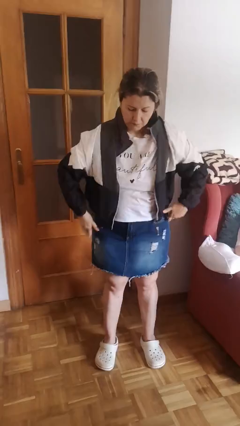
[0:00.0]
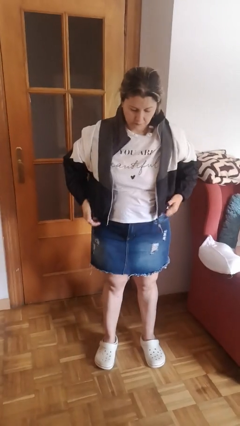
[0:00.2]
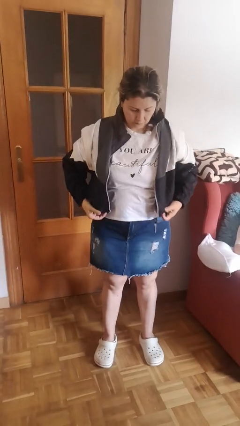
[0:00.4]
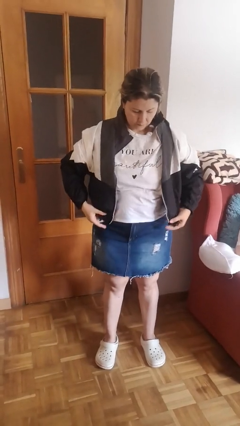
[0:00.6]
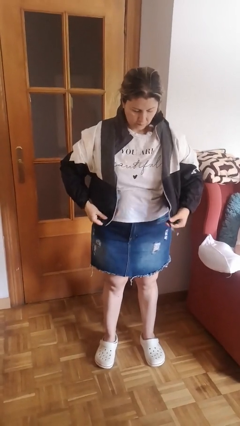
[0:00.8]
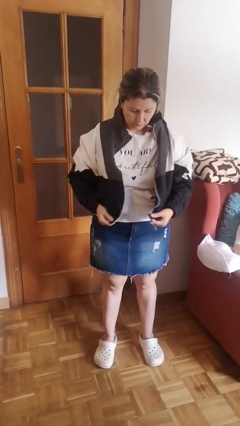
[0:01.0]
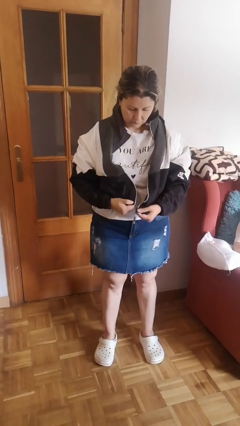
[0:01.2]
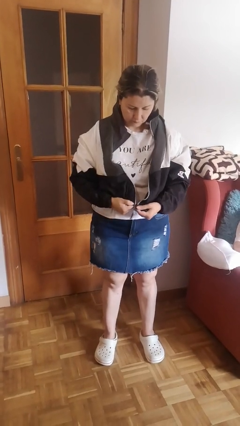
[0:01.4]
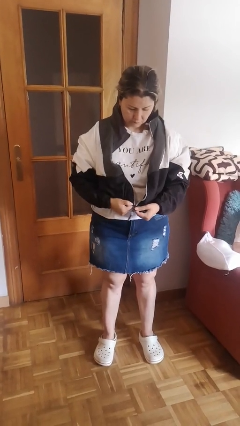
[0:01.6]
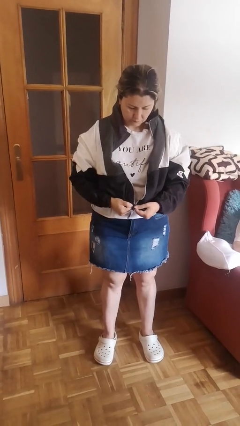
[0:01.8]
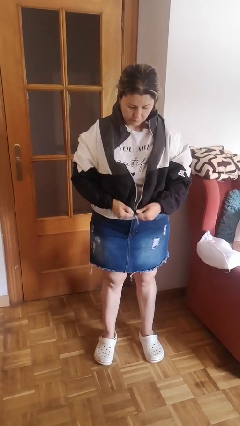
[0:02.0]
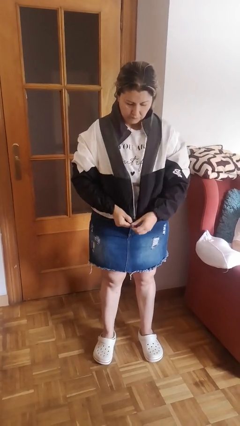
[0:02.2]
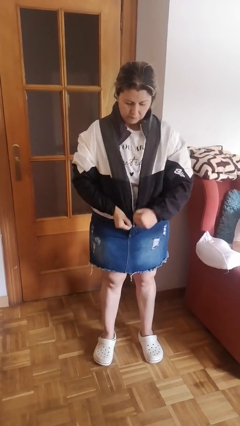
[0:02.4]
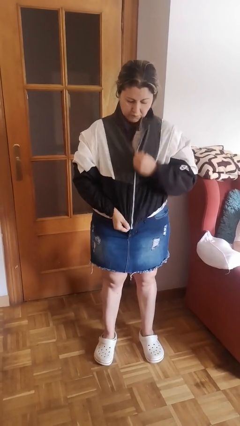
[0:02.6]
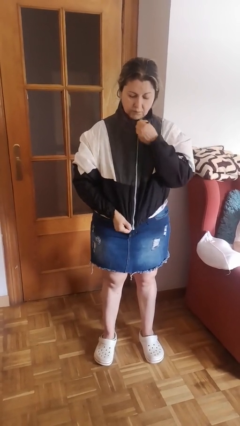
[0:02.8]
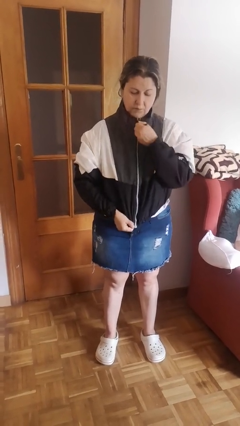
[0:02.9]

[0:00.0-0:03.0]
person zips up jacket

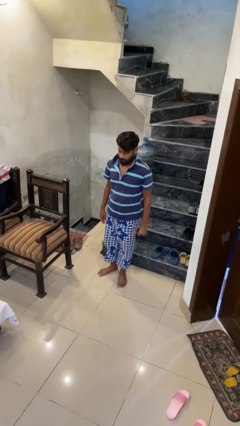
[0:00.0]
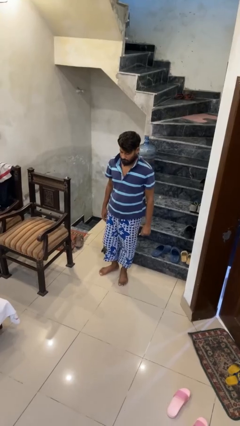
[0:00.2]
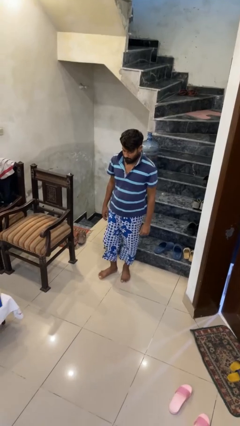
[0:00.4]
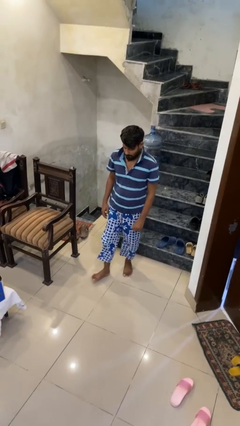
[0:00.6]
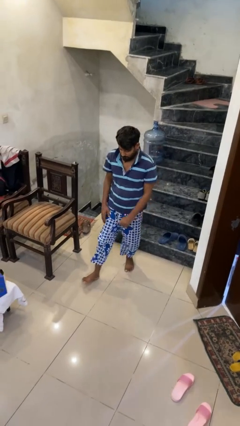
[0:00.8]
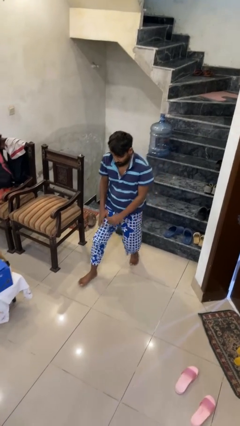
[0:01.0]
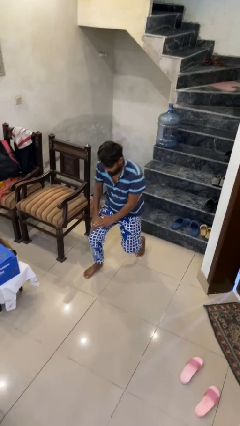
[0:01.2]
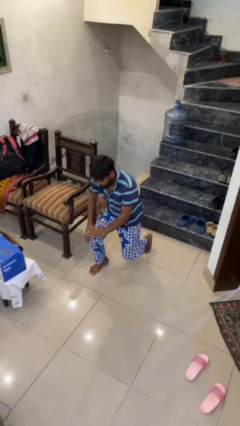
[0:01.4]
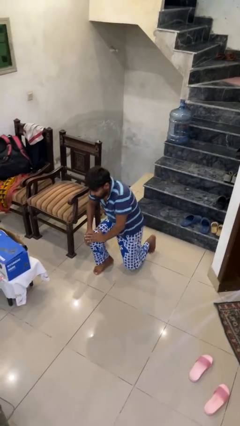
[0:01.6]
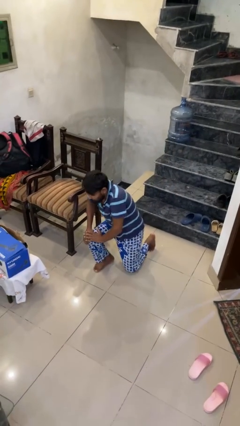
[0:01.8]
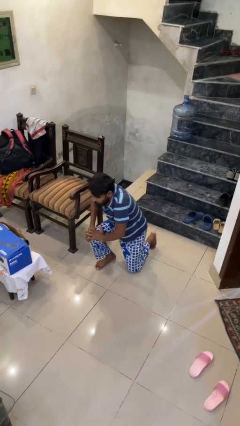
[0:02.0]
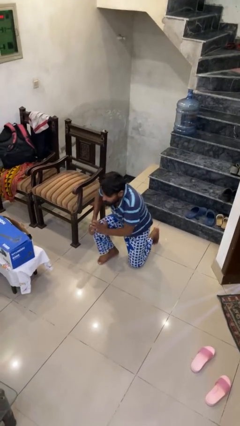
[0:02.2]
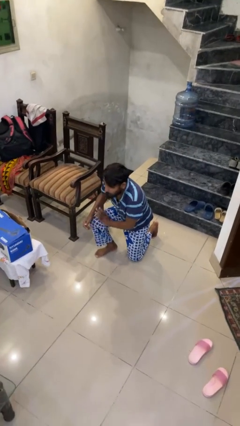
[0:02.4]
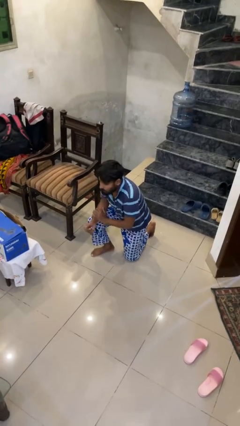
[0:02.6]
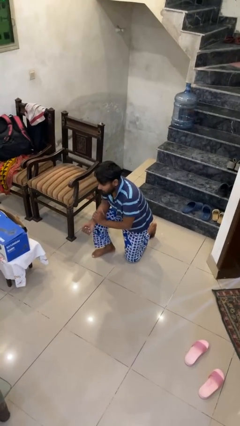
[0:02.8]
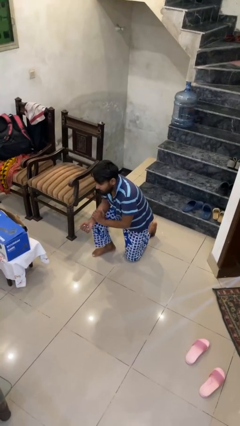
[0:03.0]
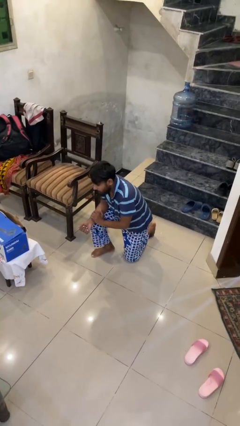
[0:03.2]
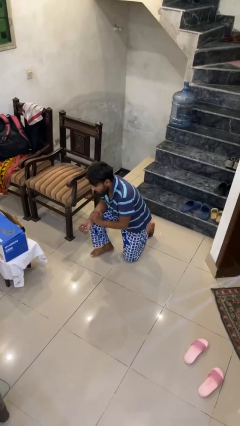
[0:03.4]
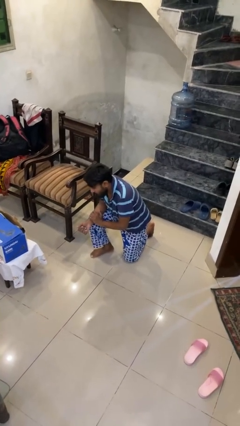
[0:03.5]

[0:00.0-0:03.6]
person kneels

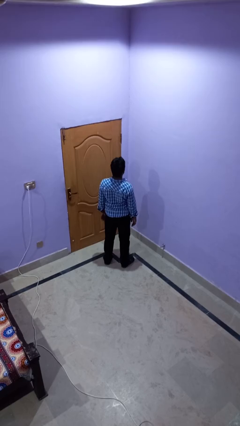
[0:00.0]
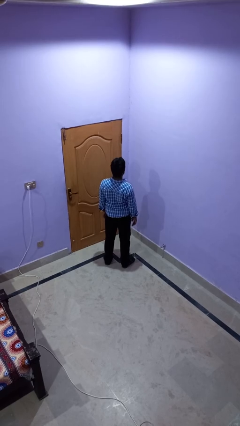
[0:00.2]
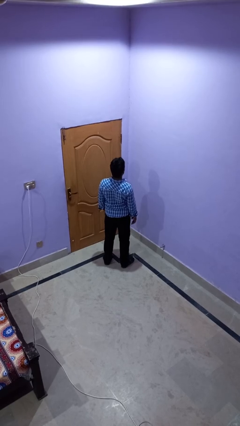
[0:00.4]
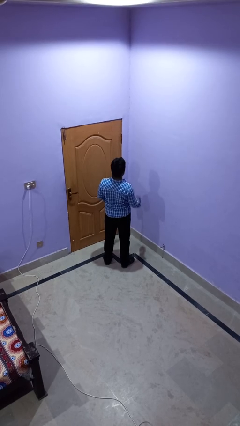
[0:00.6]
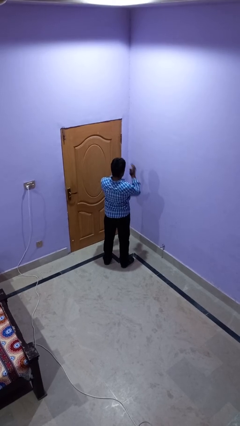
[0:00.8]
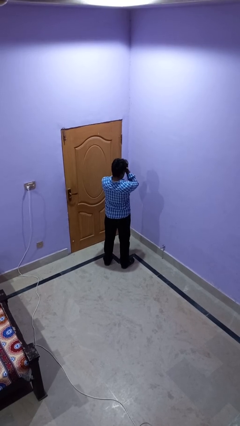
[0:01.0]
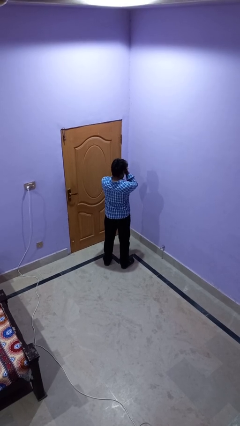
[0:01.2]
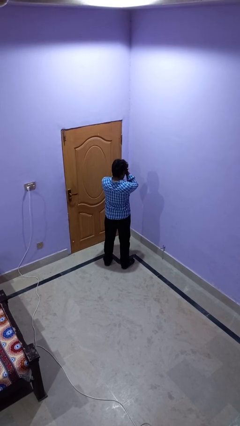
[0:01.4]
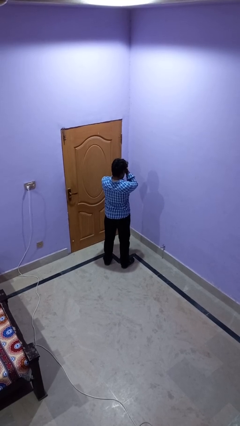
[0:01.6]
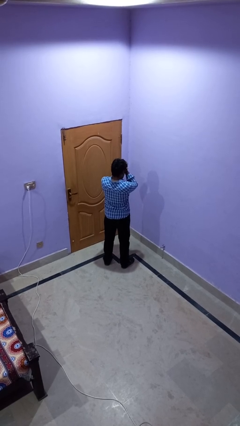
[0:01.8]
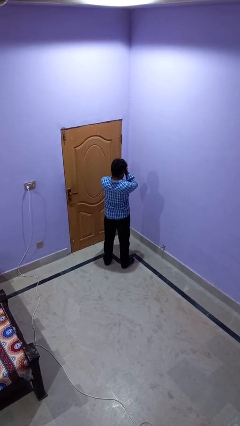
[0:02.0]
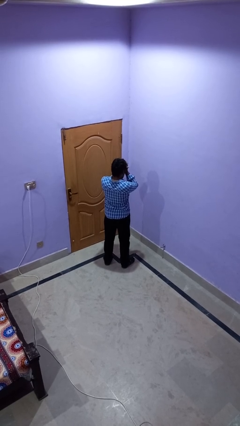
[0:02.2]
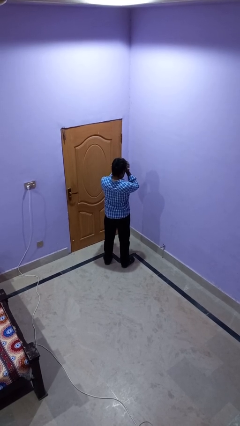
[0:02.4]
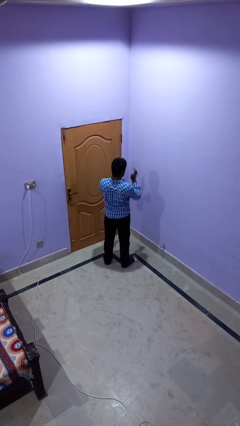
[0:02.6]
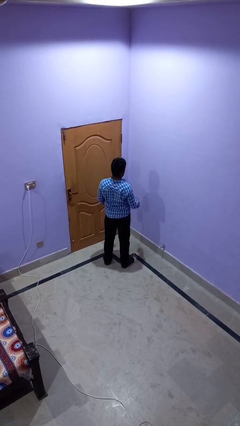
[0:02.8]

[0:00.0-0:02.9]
person rubs eyes

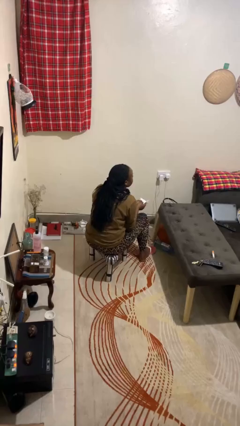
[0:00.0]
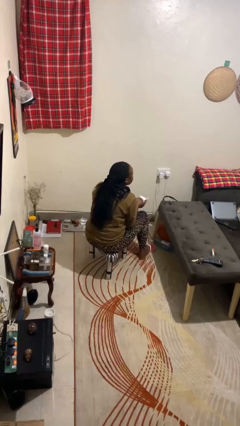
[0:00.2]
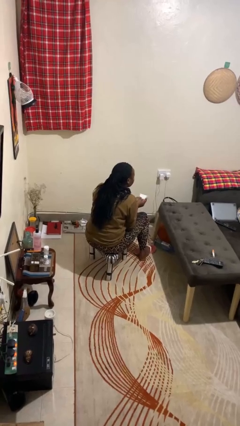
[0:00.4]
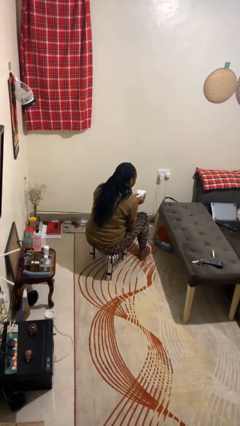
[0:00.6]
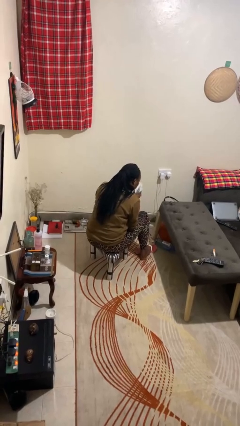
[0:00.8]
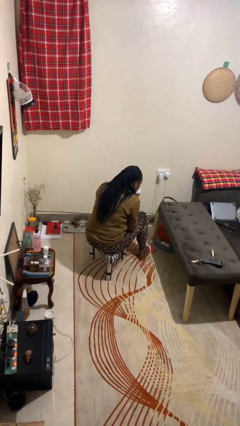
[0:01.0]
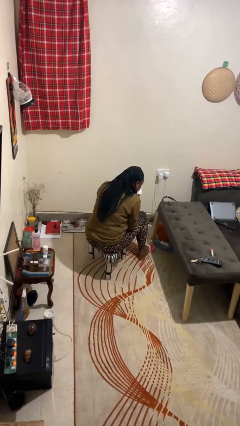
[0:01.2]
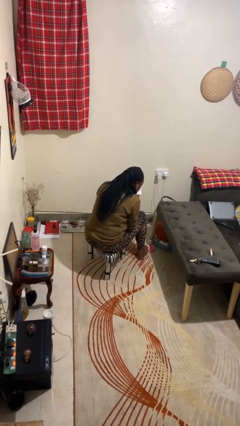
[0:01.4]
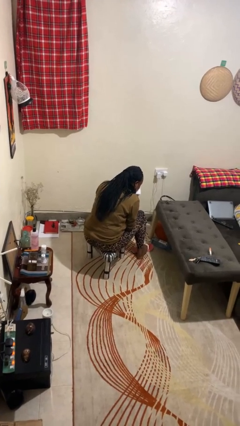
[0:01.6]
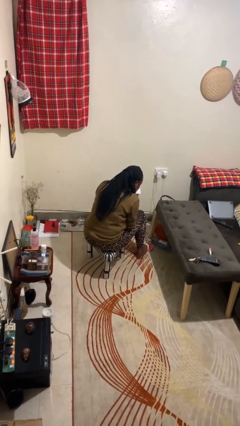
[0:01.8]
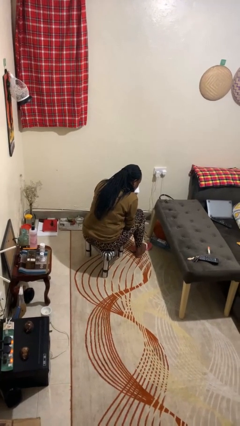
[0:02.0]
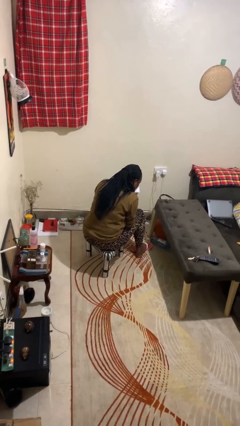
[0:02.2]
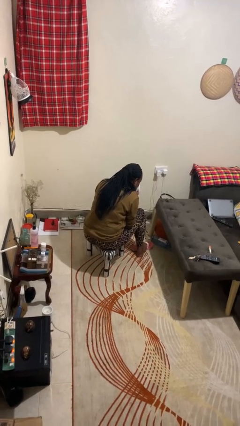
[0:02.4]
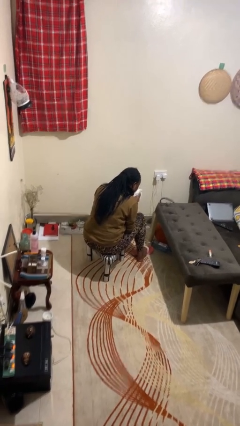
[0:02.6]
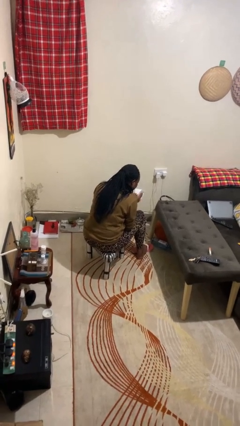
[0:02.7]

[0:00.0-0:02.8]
person blows nose

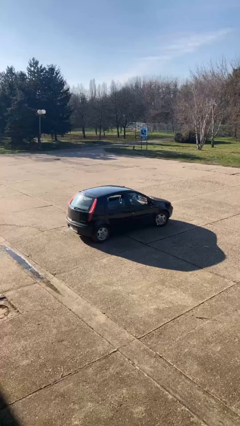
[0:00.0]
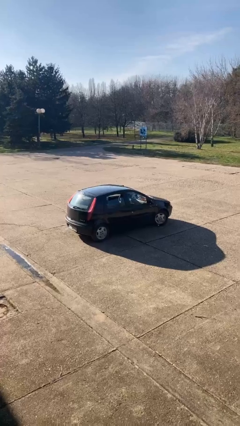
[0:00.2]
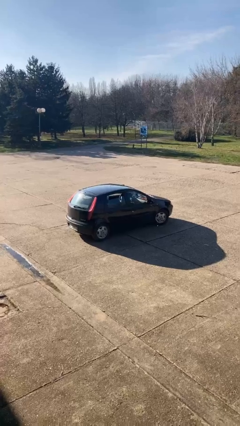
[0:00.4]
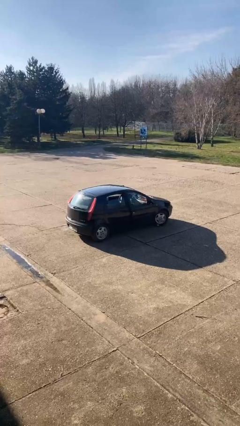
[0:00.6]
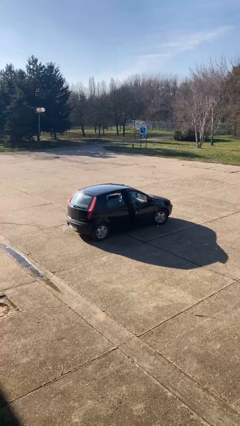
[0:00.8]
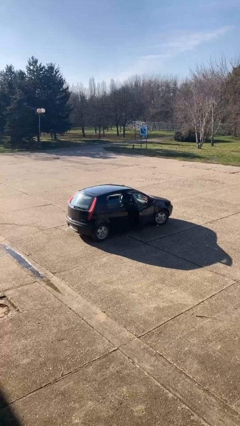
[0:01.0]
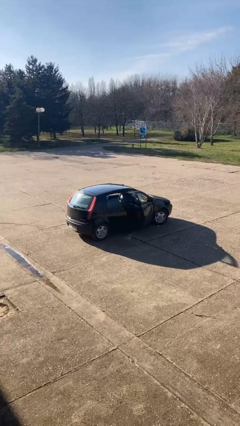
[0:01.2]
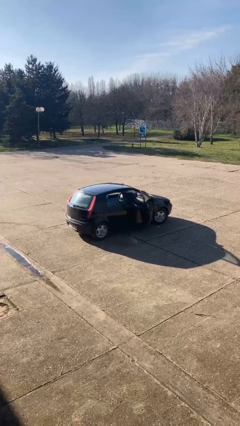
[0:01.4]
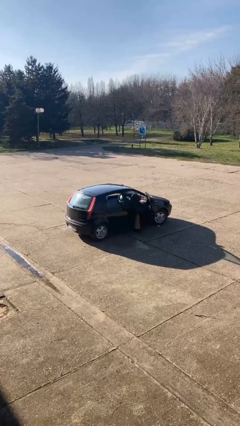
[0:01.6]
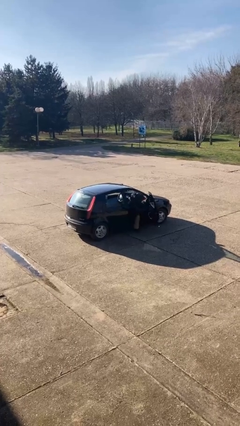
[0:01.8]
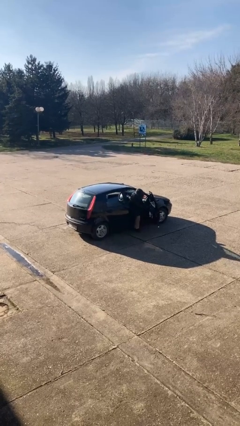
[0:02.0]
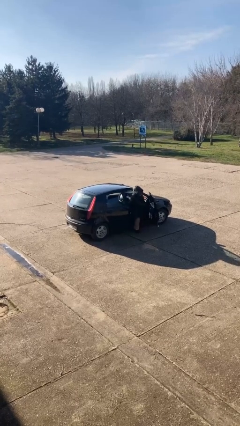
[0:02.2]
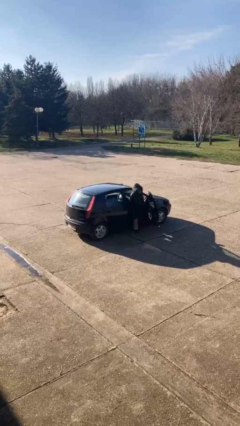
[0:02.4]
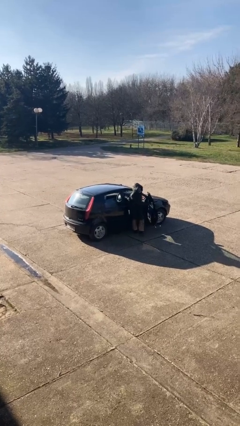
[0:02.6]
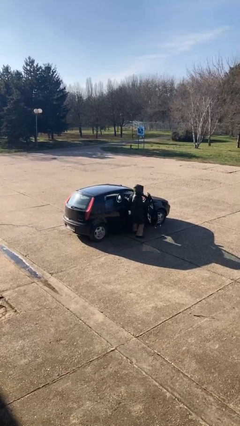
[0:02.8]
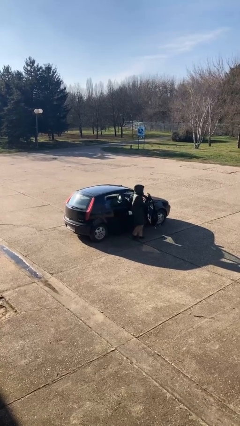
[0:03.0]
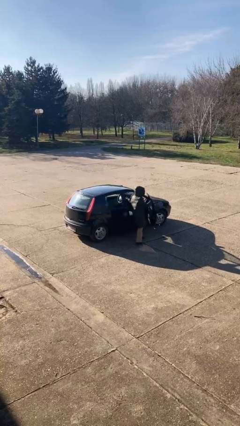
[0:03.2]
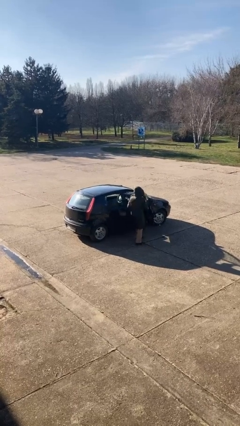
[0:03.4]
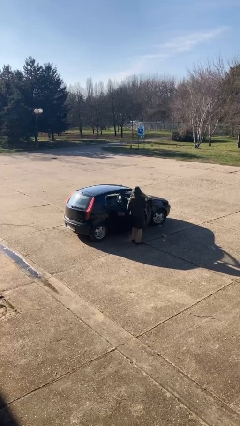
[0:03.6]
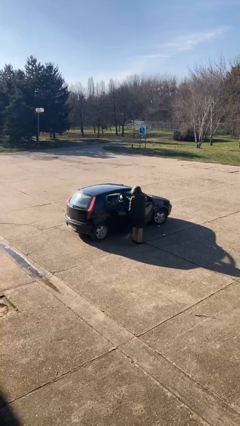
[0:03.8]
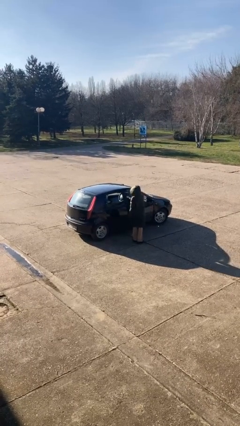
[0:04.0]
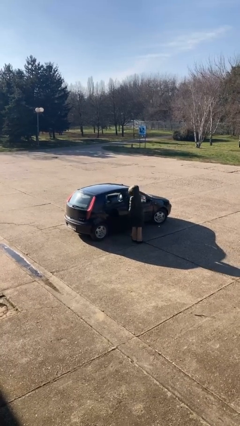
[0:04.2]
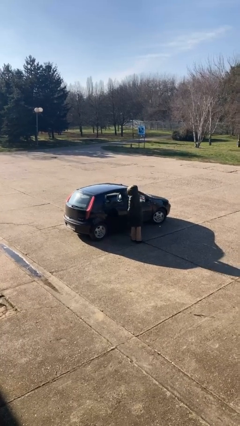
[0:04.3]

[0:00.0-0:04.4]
car drops off person

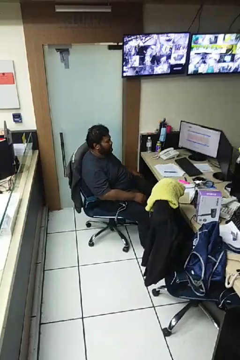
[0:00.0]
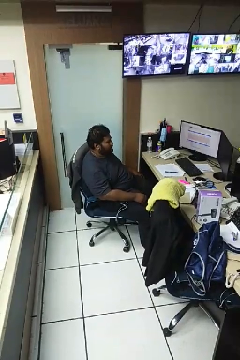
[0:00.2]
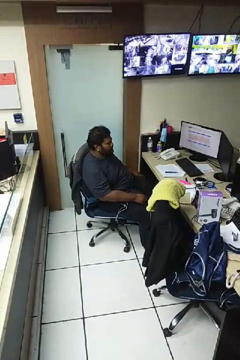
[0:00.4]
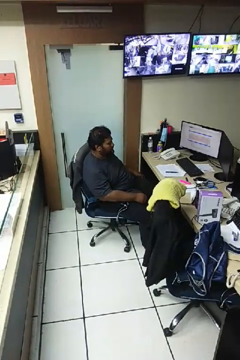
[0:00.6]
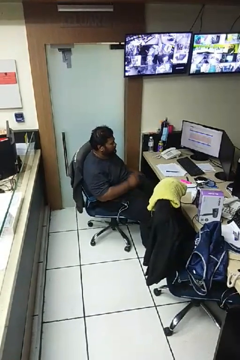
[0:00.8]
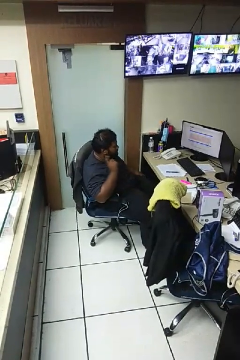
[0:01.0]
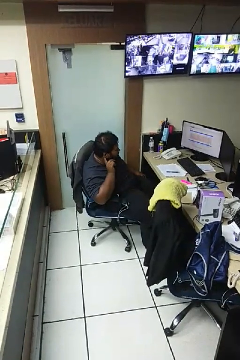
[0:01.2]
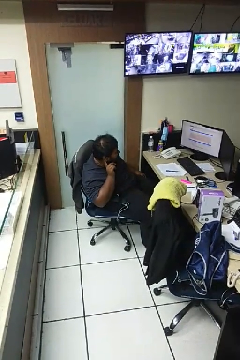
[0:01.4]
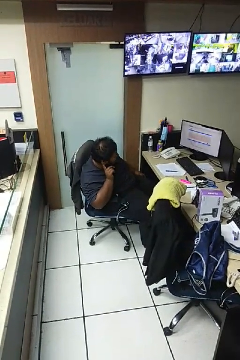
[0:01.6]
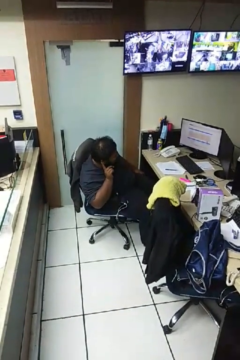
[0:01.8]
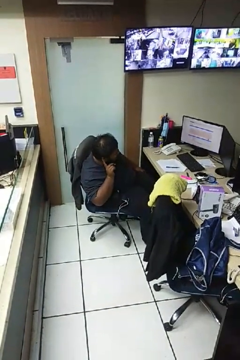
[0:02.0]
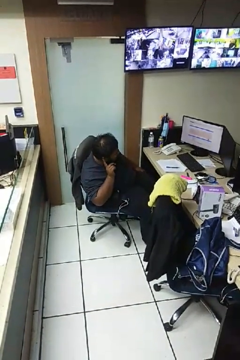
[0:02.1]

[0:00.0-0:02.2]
person gestures listen closely
